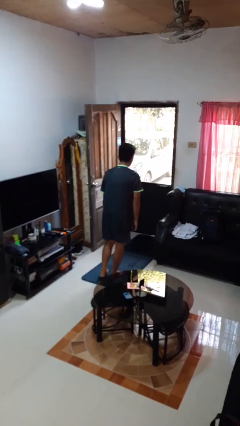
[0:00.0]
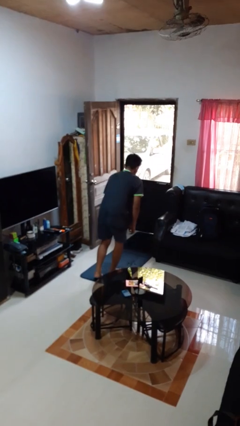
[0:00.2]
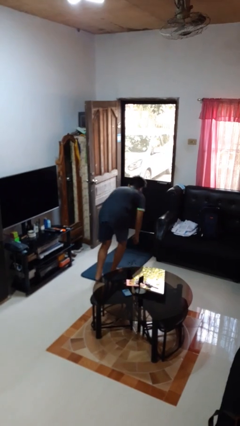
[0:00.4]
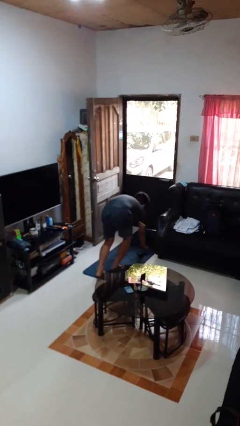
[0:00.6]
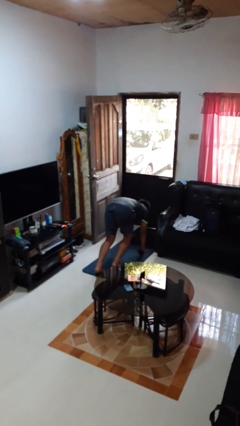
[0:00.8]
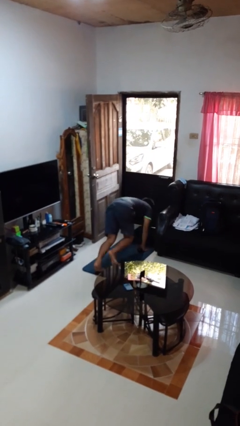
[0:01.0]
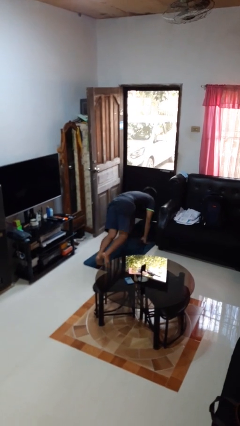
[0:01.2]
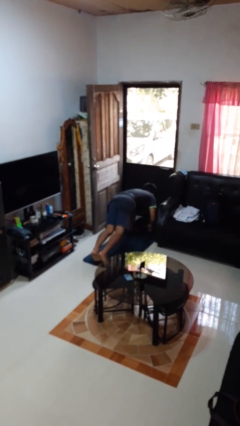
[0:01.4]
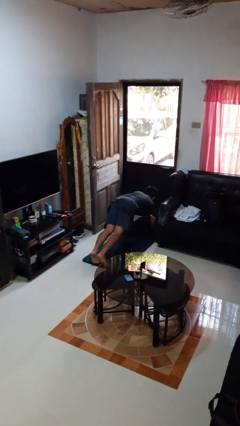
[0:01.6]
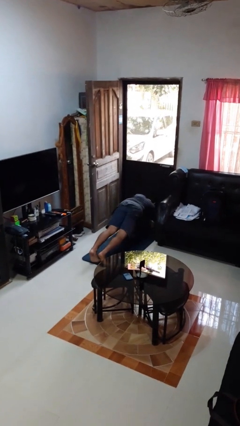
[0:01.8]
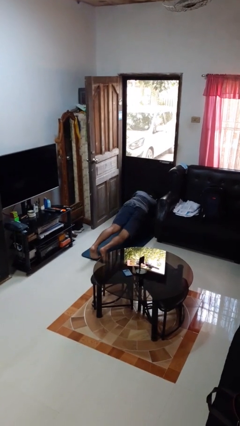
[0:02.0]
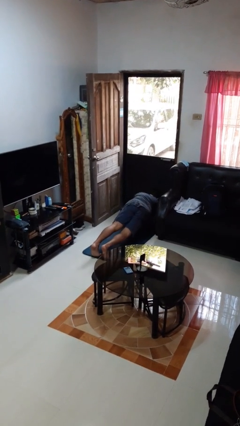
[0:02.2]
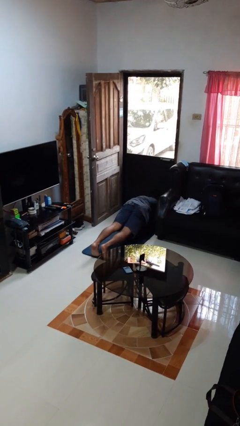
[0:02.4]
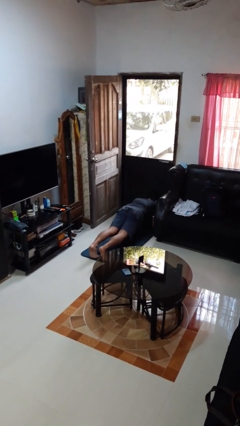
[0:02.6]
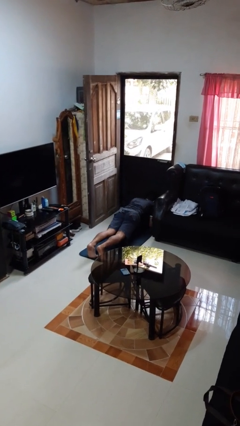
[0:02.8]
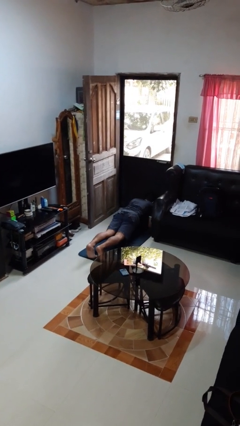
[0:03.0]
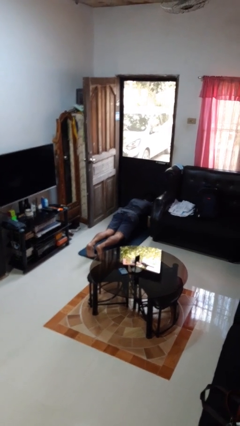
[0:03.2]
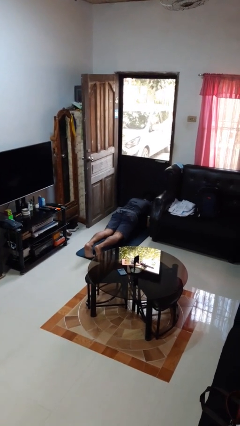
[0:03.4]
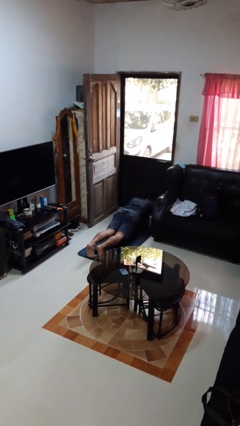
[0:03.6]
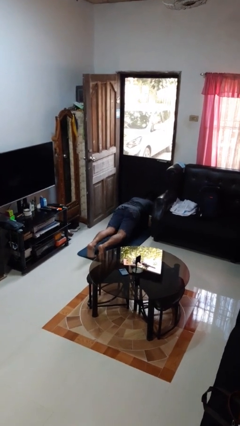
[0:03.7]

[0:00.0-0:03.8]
person exercises with plank

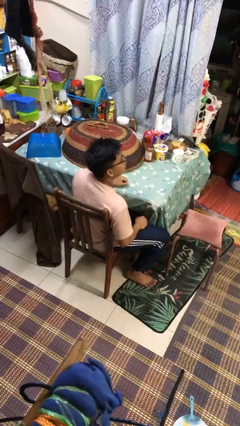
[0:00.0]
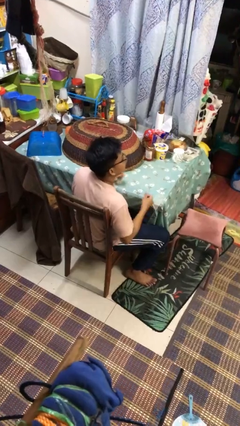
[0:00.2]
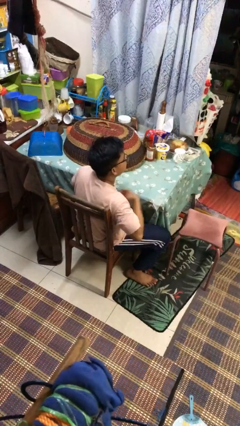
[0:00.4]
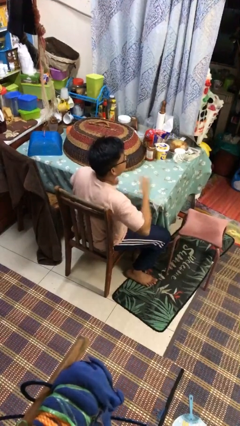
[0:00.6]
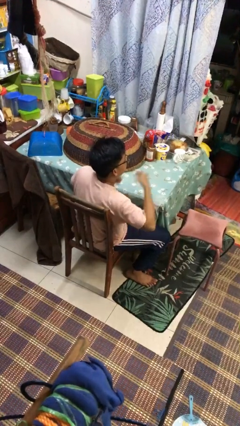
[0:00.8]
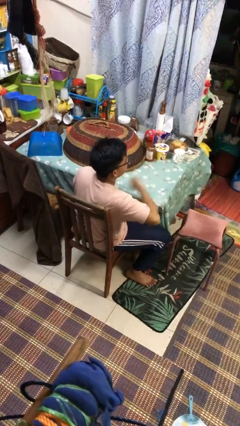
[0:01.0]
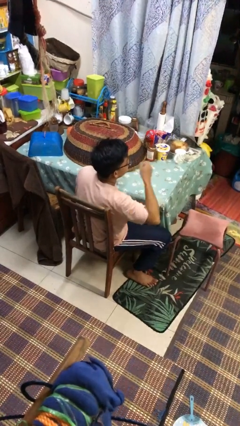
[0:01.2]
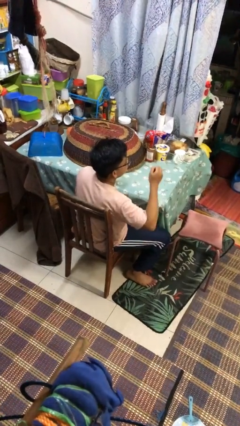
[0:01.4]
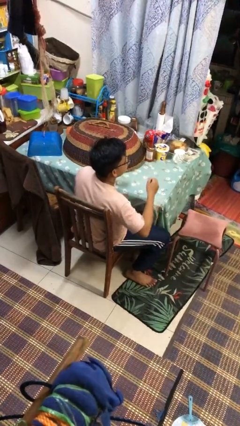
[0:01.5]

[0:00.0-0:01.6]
person drums on chest

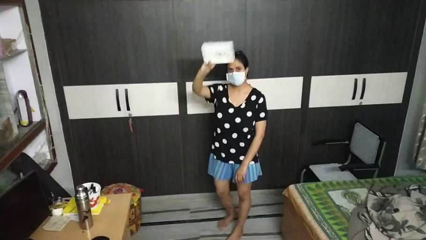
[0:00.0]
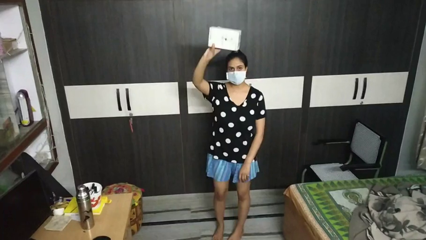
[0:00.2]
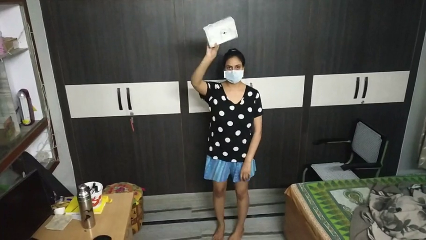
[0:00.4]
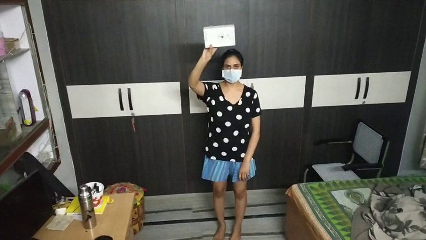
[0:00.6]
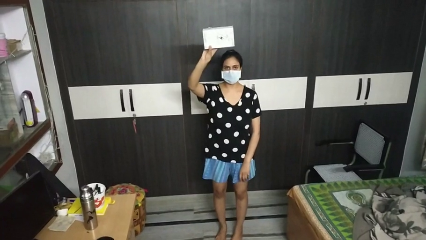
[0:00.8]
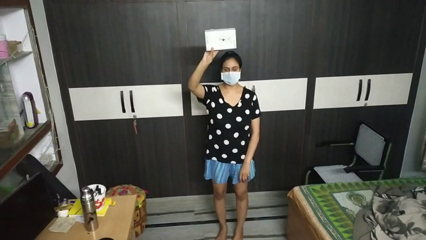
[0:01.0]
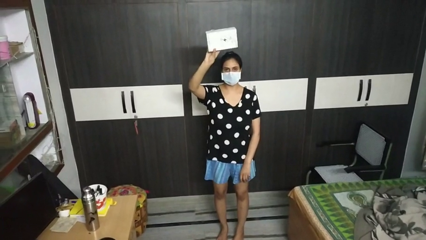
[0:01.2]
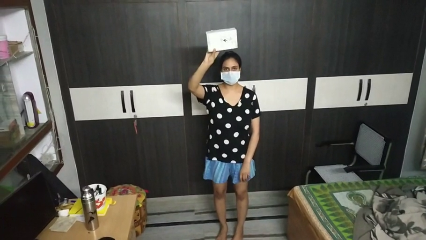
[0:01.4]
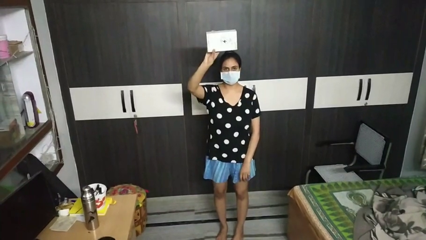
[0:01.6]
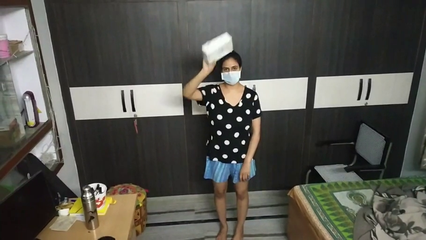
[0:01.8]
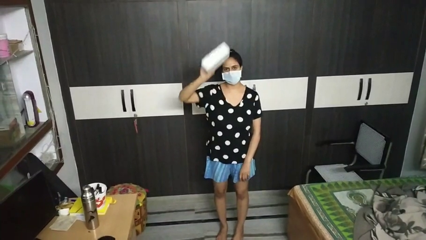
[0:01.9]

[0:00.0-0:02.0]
person holds object above head

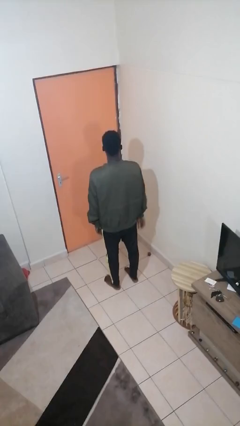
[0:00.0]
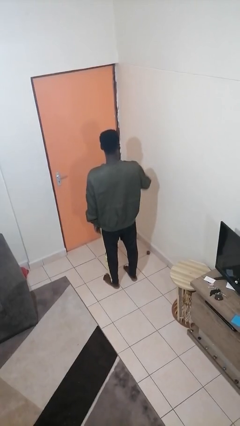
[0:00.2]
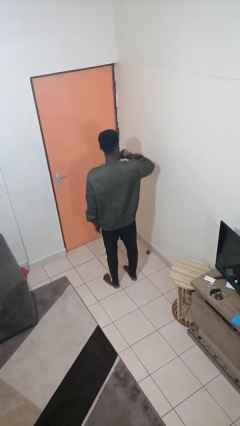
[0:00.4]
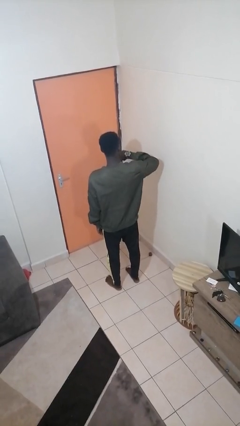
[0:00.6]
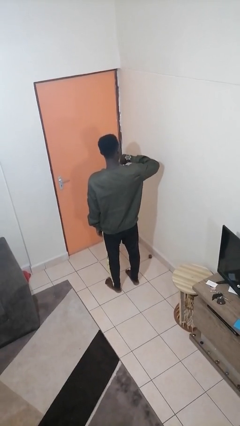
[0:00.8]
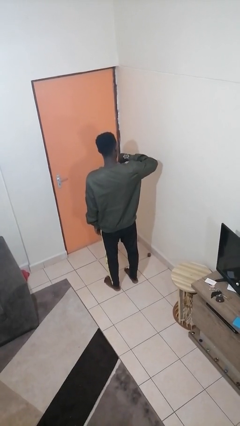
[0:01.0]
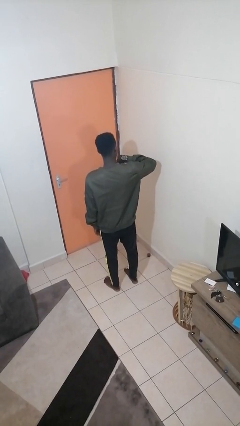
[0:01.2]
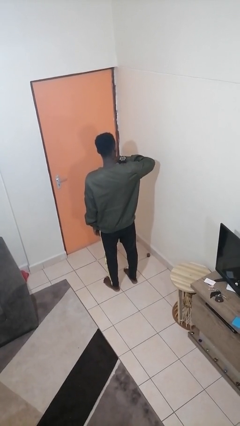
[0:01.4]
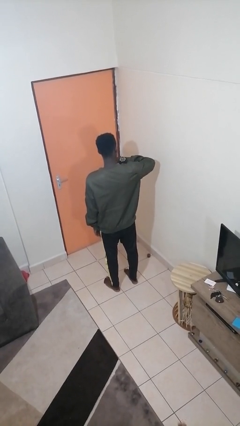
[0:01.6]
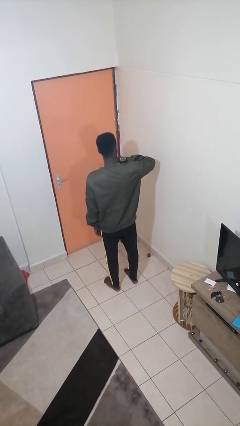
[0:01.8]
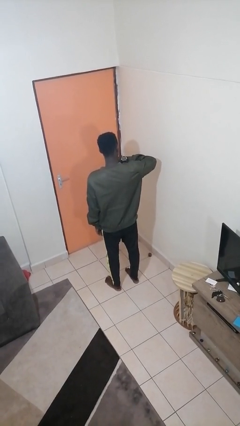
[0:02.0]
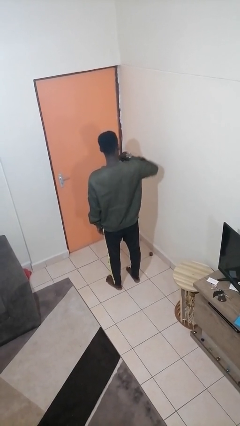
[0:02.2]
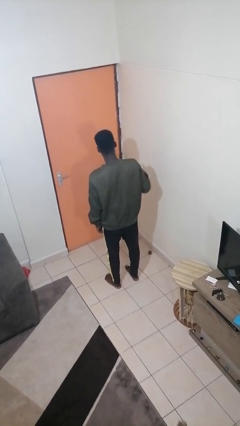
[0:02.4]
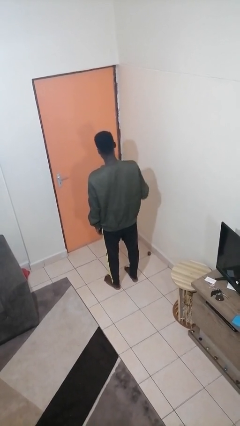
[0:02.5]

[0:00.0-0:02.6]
person looks at wristwatch

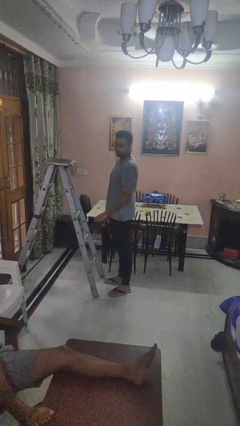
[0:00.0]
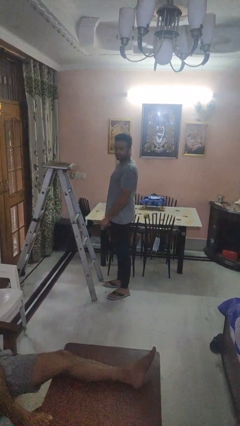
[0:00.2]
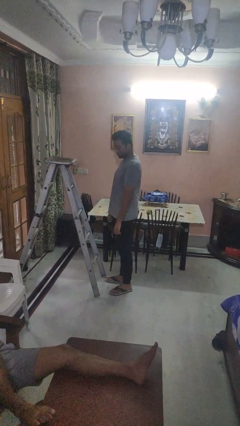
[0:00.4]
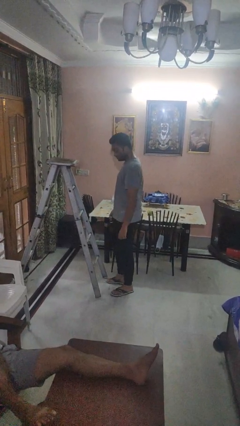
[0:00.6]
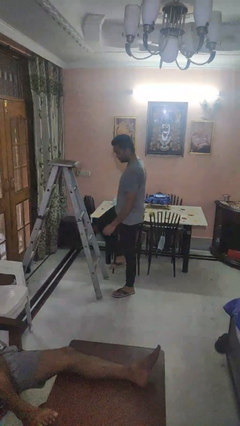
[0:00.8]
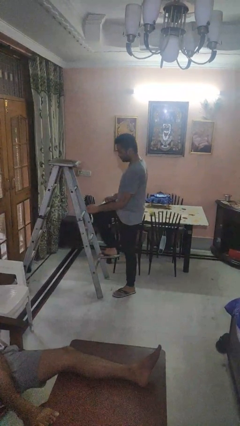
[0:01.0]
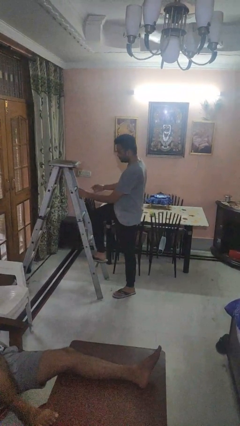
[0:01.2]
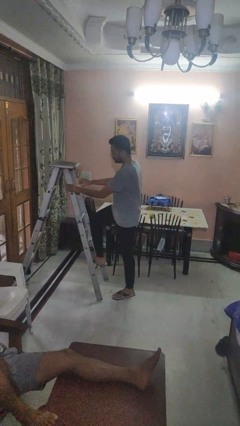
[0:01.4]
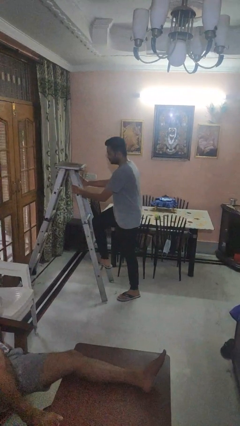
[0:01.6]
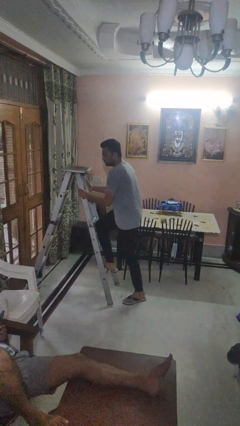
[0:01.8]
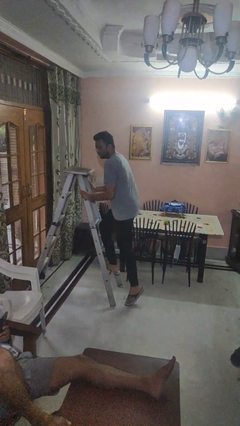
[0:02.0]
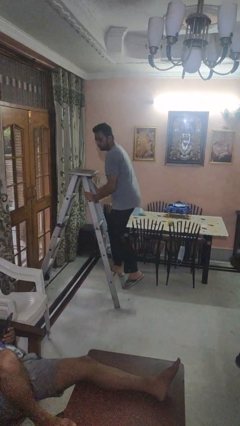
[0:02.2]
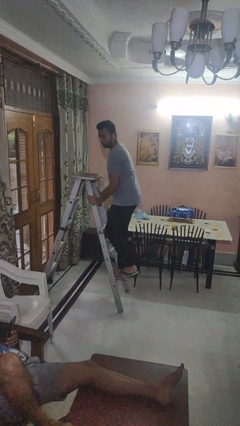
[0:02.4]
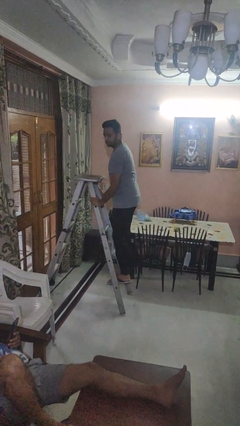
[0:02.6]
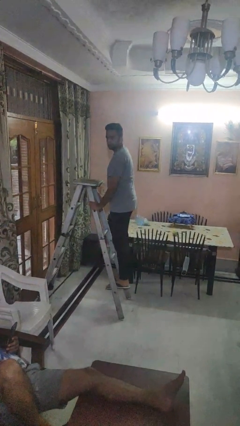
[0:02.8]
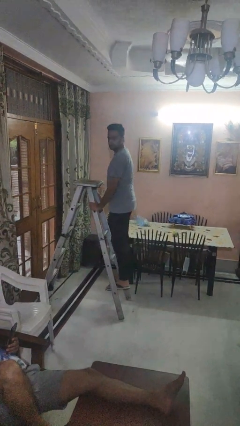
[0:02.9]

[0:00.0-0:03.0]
person climbs up ladder

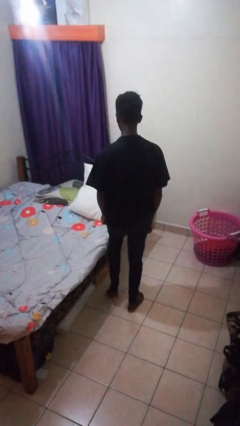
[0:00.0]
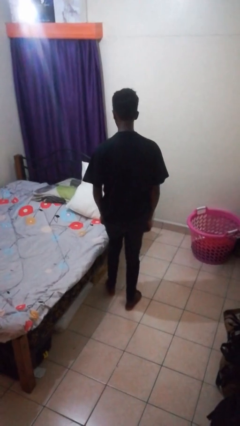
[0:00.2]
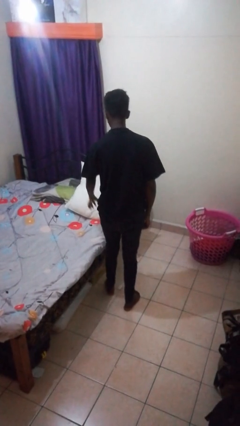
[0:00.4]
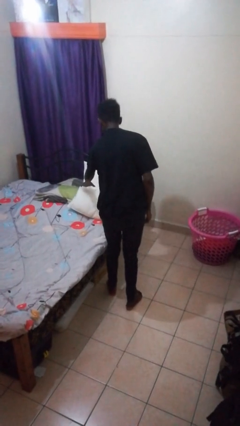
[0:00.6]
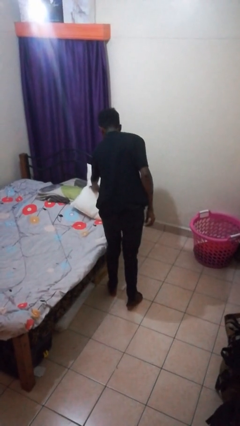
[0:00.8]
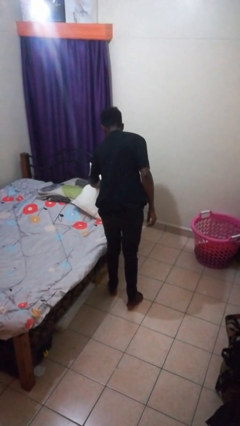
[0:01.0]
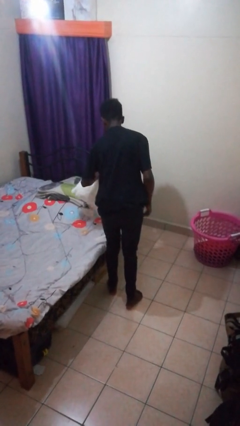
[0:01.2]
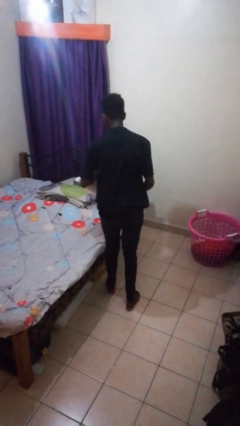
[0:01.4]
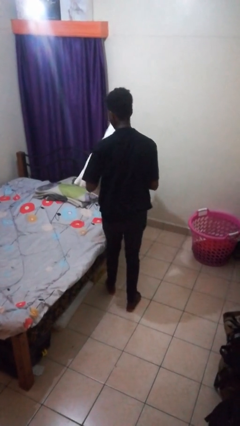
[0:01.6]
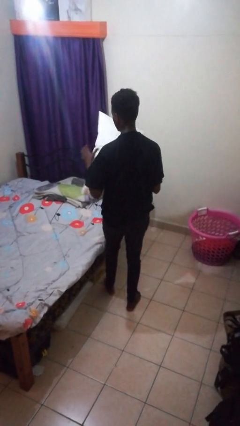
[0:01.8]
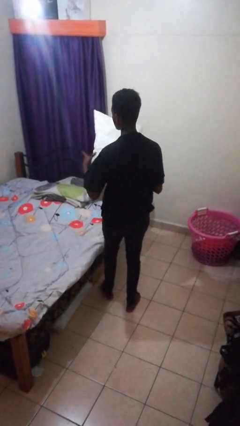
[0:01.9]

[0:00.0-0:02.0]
person picks up object from bed

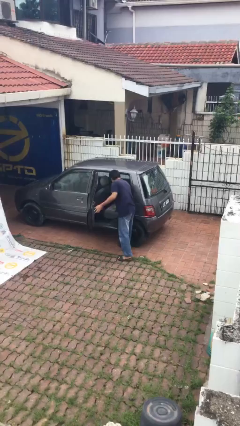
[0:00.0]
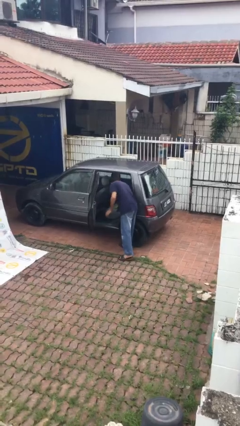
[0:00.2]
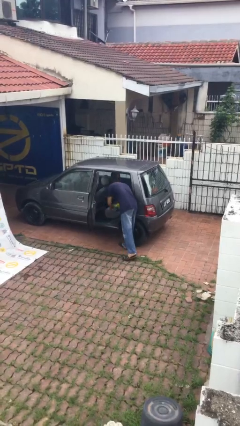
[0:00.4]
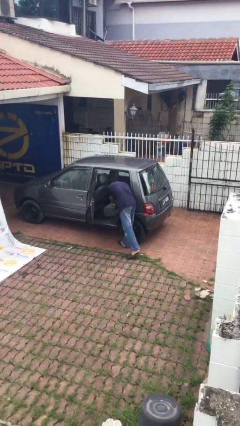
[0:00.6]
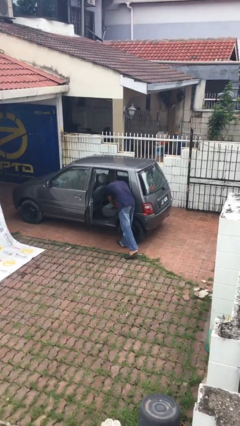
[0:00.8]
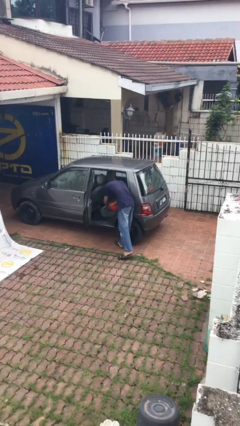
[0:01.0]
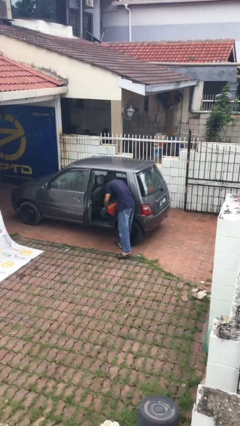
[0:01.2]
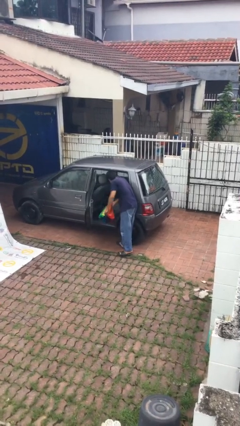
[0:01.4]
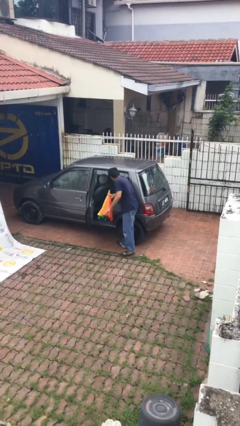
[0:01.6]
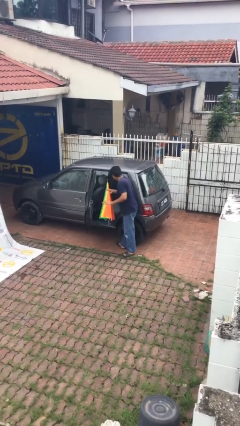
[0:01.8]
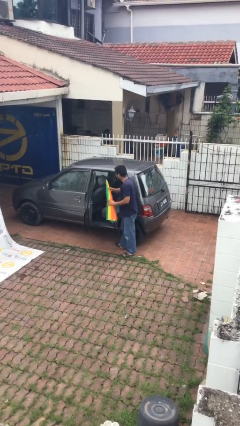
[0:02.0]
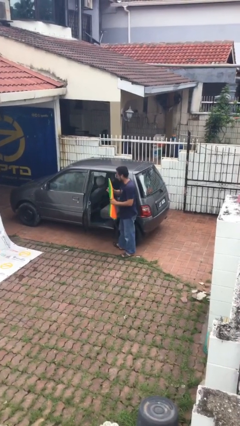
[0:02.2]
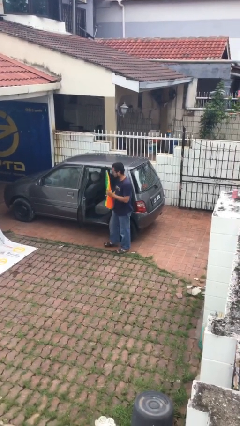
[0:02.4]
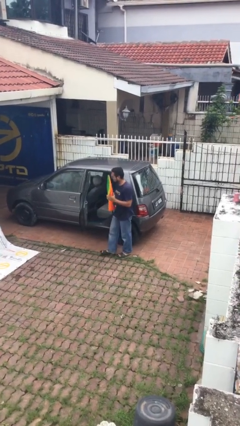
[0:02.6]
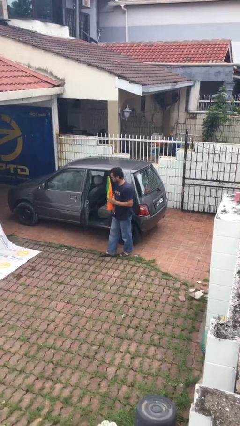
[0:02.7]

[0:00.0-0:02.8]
person unloads car
